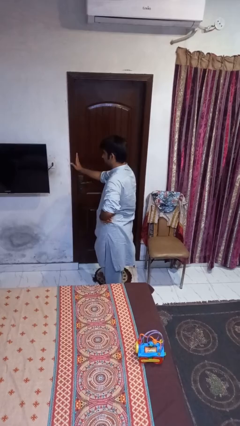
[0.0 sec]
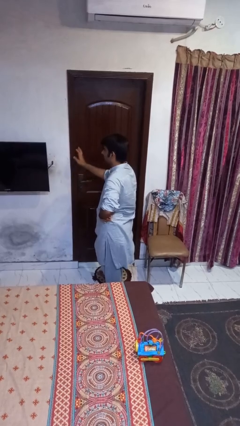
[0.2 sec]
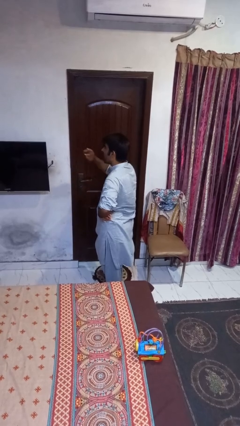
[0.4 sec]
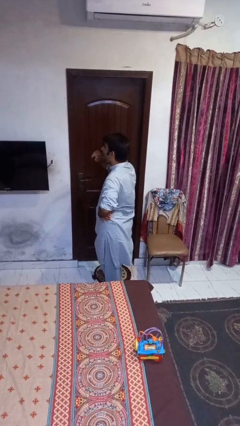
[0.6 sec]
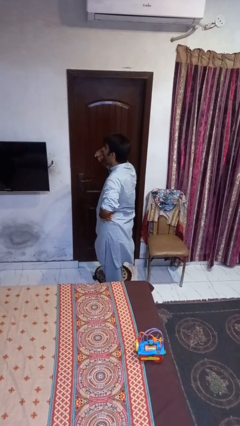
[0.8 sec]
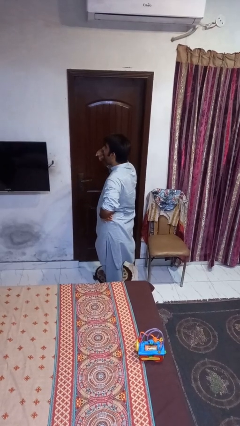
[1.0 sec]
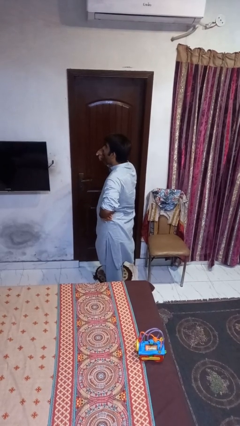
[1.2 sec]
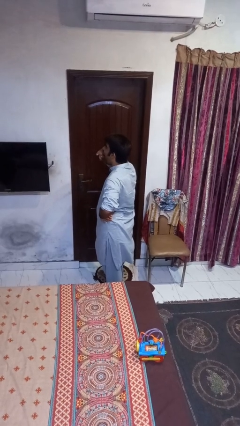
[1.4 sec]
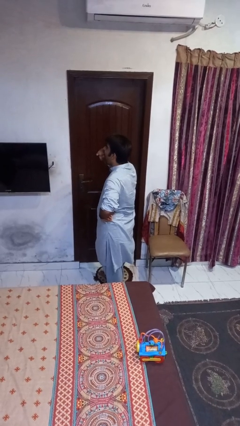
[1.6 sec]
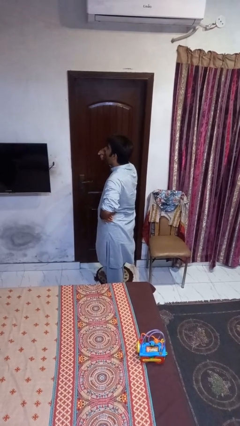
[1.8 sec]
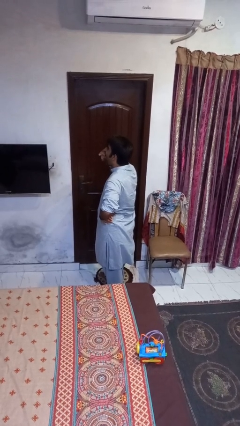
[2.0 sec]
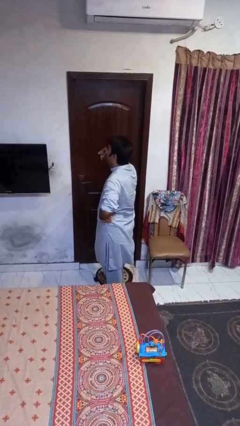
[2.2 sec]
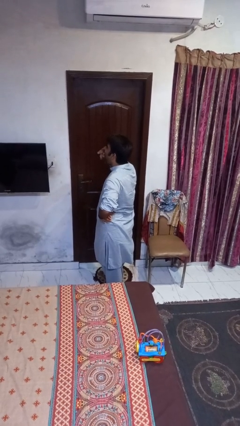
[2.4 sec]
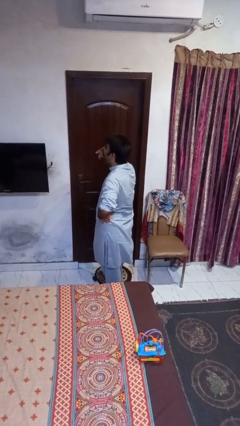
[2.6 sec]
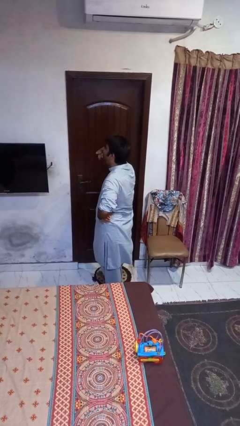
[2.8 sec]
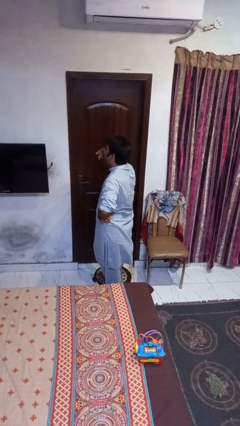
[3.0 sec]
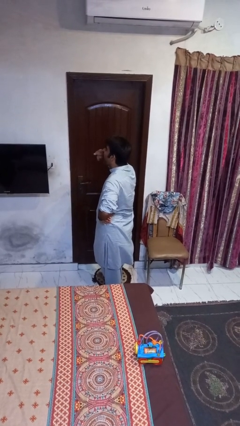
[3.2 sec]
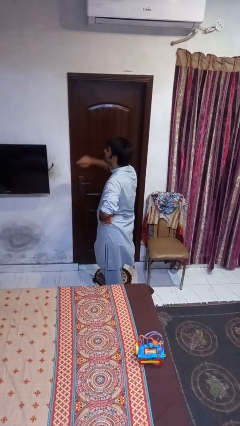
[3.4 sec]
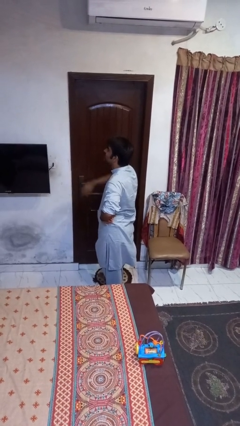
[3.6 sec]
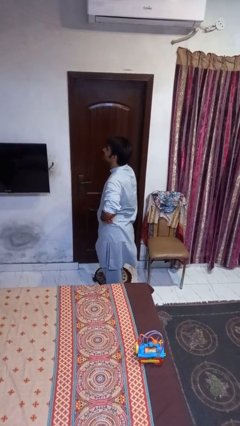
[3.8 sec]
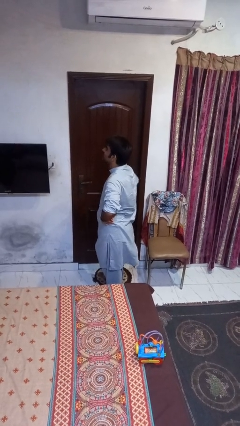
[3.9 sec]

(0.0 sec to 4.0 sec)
person yawns

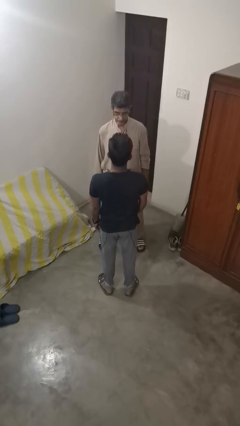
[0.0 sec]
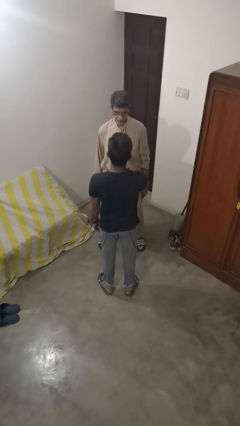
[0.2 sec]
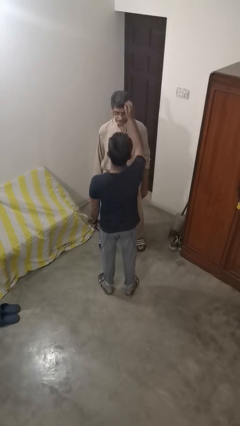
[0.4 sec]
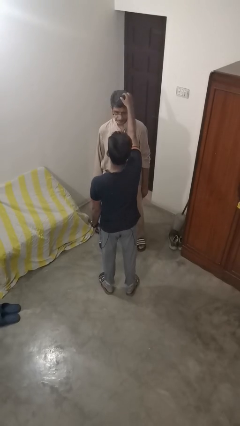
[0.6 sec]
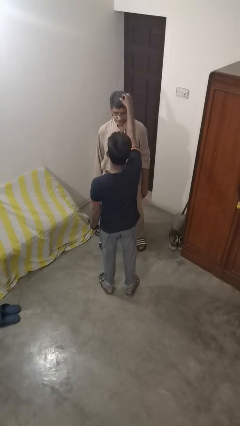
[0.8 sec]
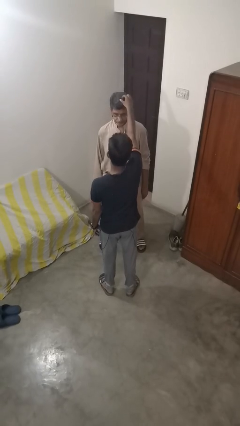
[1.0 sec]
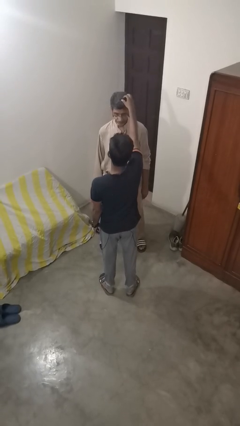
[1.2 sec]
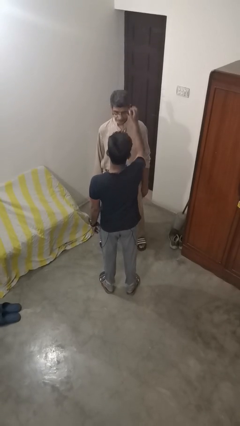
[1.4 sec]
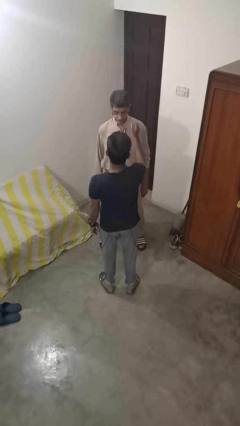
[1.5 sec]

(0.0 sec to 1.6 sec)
person grabs person by hair

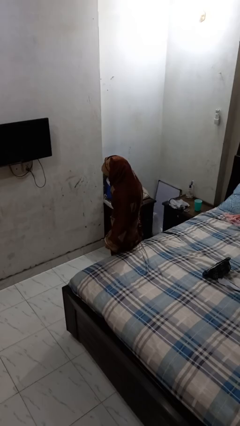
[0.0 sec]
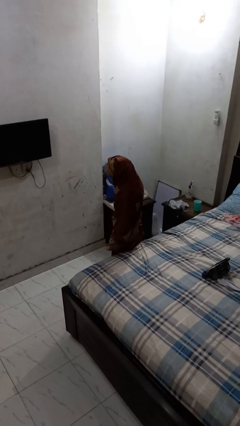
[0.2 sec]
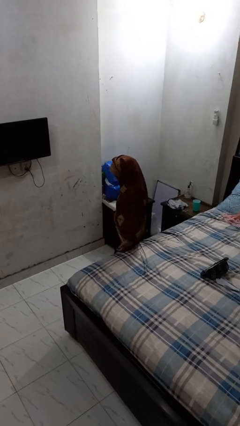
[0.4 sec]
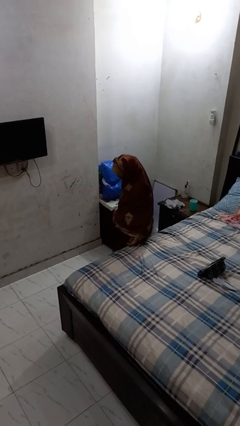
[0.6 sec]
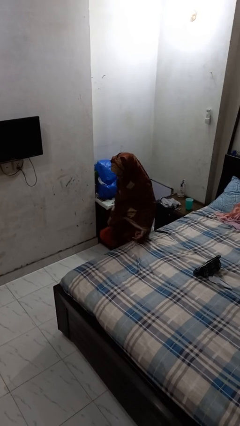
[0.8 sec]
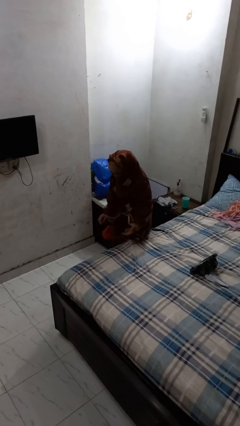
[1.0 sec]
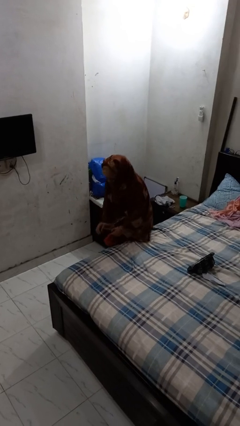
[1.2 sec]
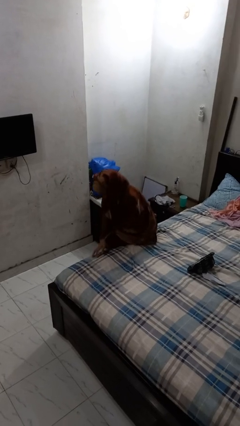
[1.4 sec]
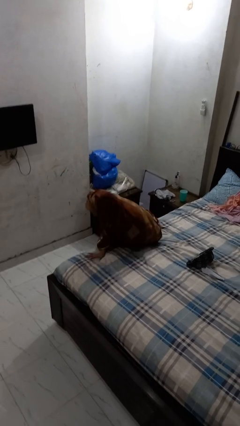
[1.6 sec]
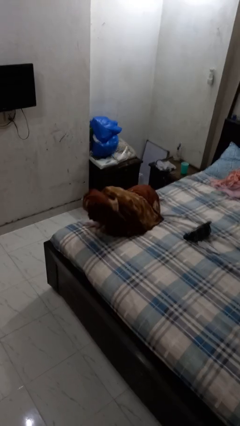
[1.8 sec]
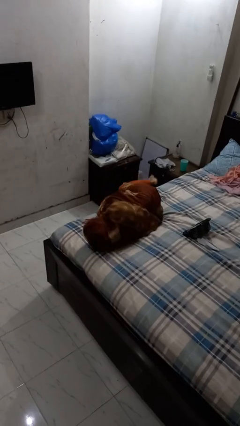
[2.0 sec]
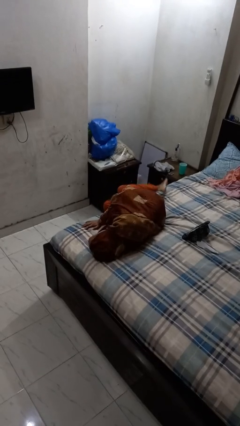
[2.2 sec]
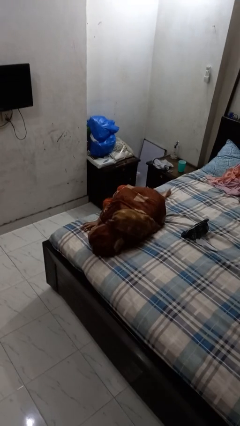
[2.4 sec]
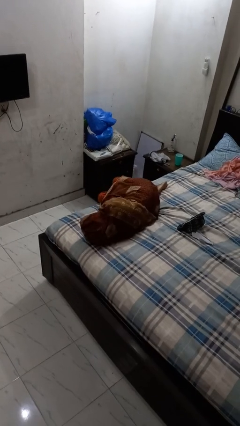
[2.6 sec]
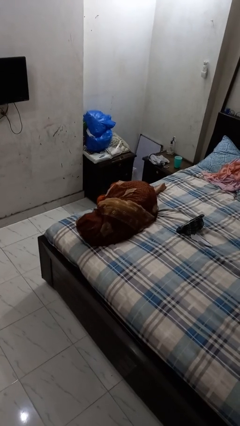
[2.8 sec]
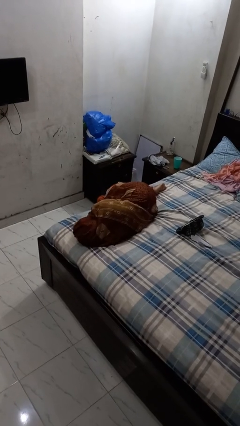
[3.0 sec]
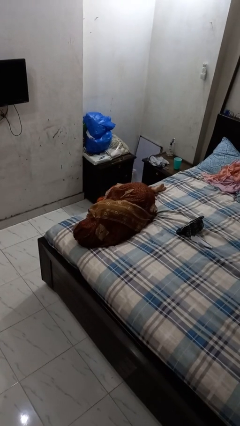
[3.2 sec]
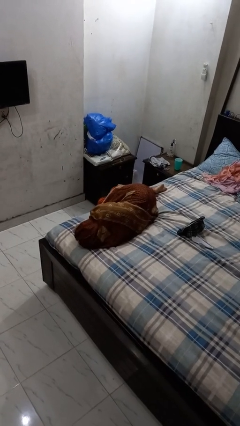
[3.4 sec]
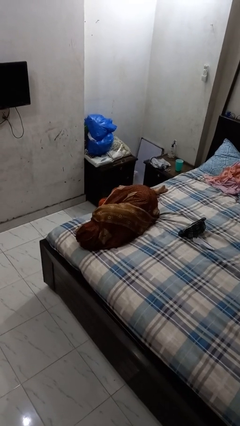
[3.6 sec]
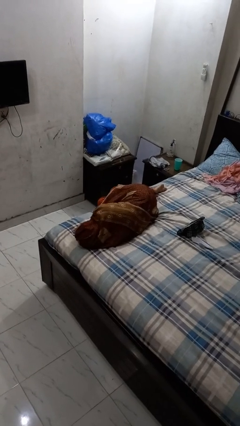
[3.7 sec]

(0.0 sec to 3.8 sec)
person lies down on bed

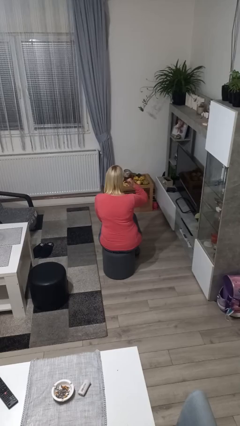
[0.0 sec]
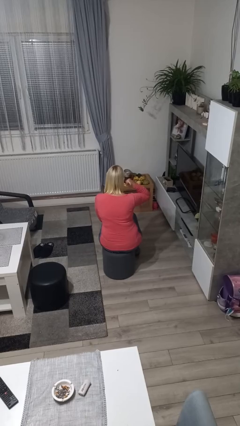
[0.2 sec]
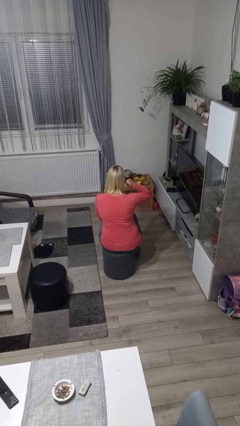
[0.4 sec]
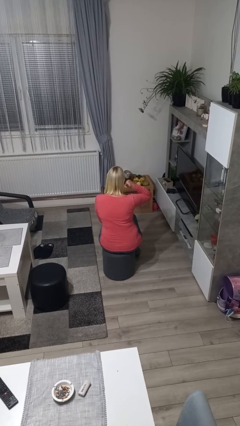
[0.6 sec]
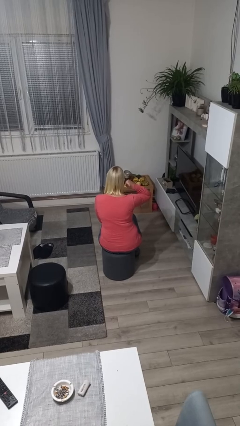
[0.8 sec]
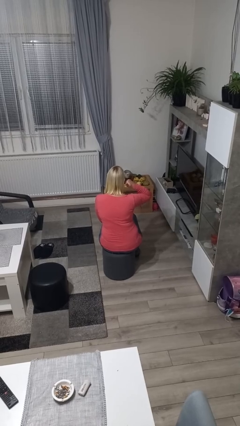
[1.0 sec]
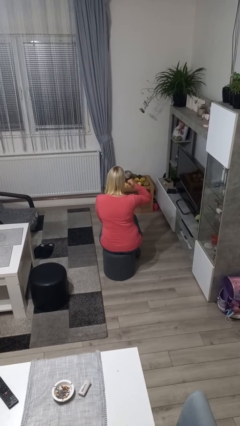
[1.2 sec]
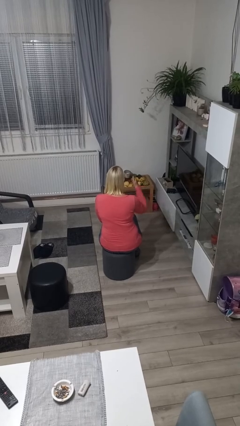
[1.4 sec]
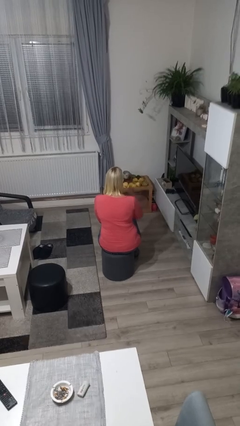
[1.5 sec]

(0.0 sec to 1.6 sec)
person gestures call me

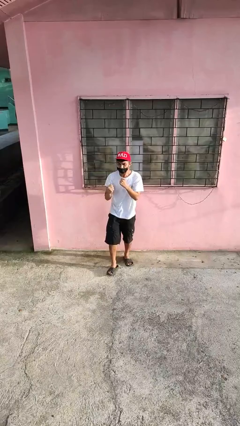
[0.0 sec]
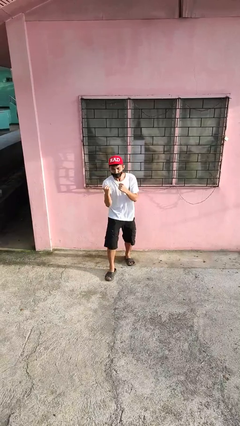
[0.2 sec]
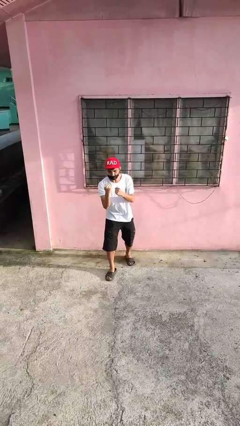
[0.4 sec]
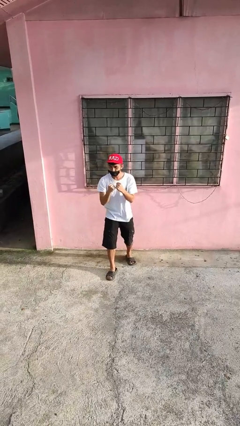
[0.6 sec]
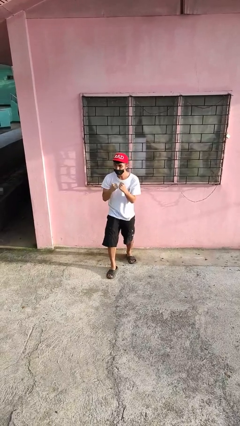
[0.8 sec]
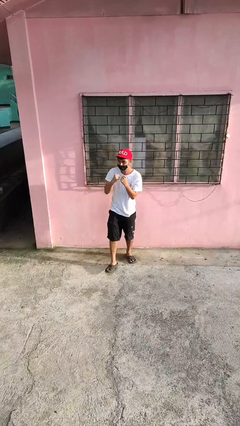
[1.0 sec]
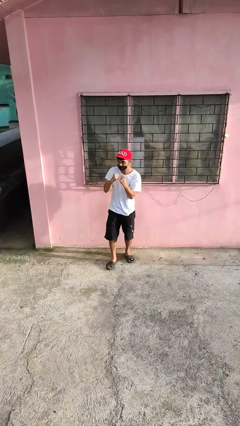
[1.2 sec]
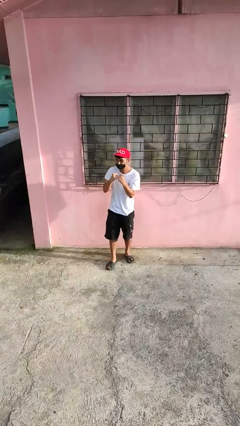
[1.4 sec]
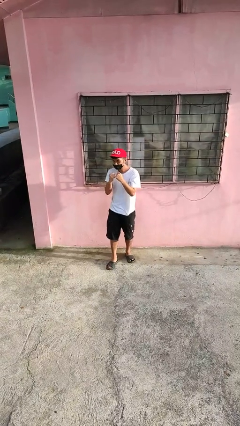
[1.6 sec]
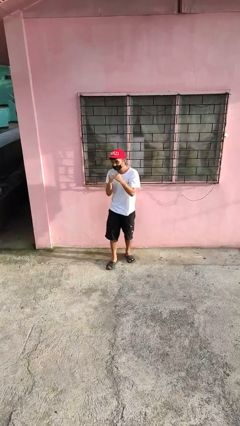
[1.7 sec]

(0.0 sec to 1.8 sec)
person punches

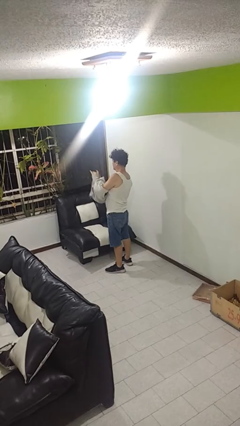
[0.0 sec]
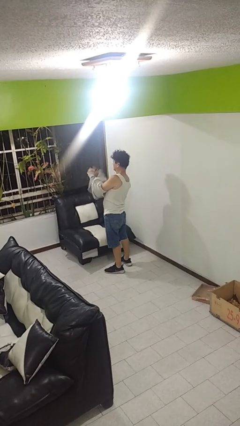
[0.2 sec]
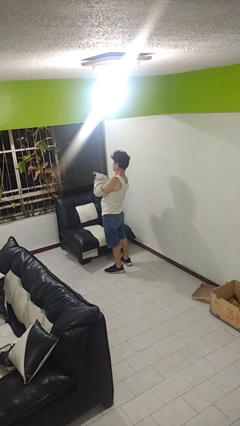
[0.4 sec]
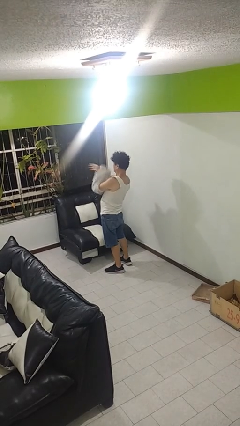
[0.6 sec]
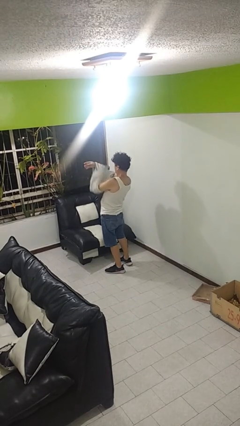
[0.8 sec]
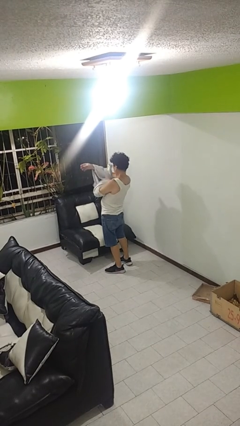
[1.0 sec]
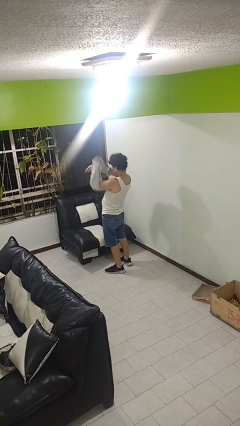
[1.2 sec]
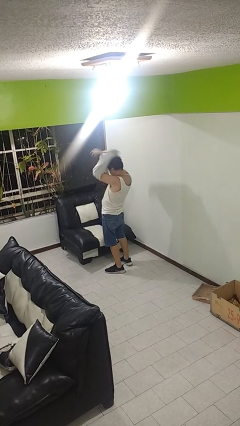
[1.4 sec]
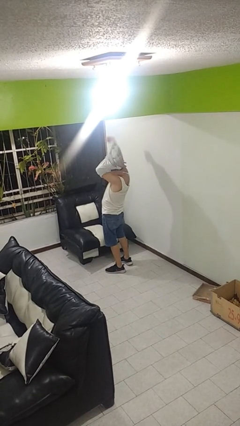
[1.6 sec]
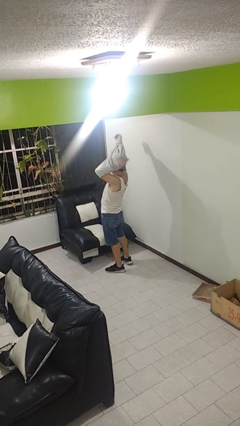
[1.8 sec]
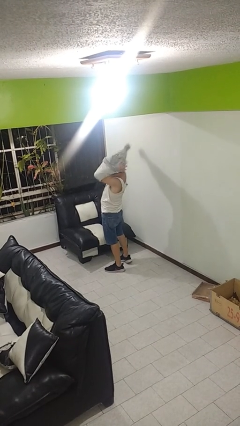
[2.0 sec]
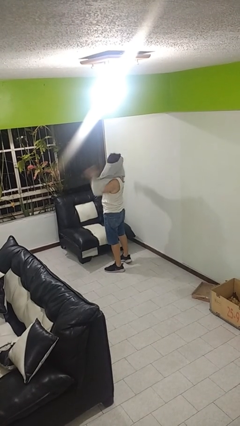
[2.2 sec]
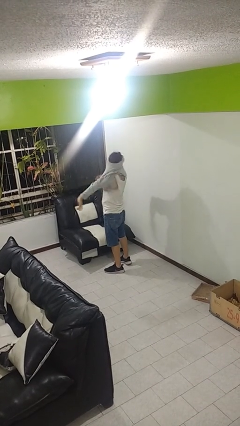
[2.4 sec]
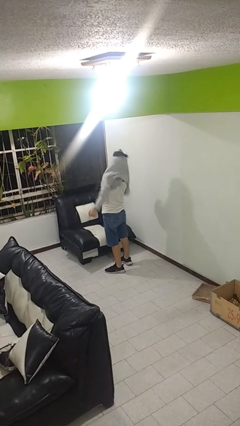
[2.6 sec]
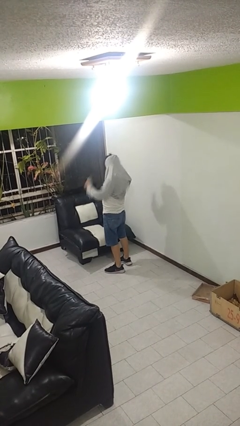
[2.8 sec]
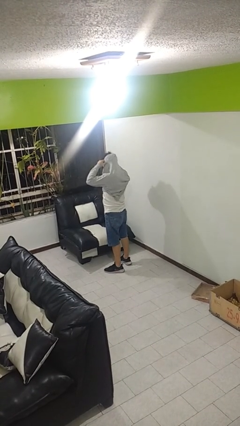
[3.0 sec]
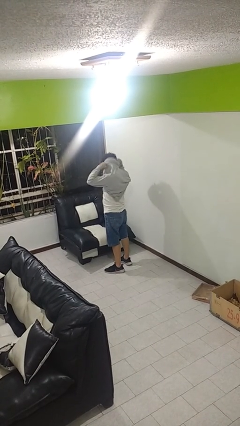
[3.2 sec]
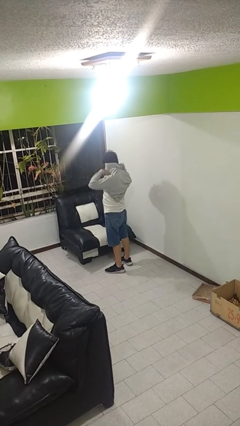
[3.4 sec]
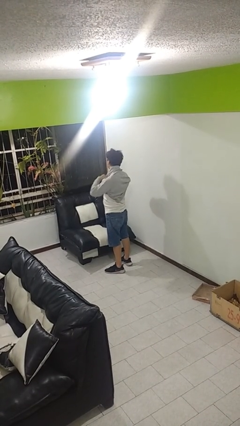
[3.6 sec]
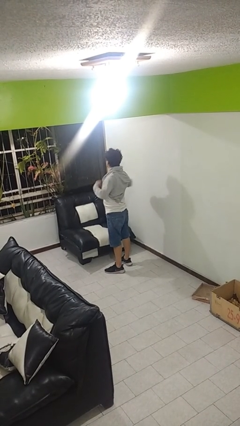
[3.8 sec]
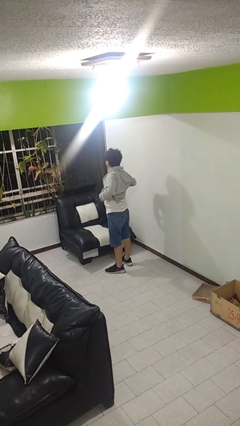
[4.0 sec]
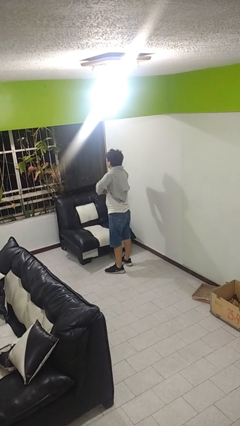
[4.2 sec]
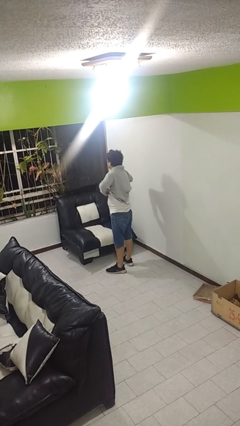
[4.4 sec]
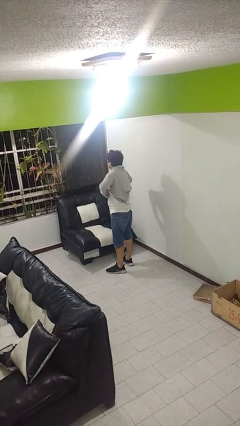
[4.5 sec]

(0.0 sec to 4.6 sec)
person puts on hoodie
